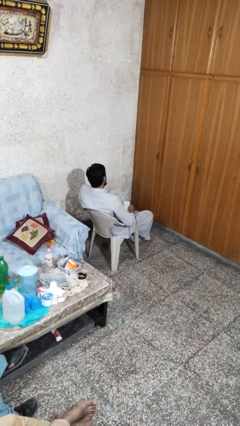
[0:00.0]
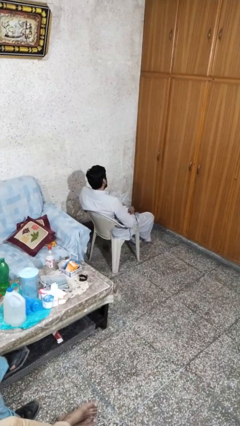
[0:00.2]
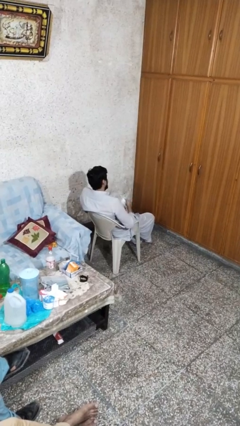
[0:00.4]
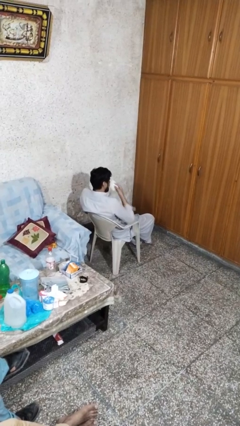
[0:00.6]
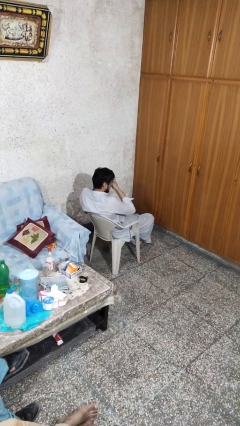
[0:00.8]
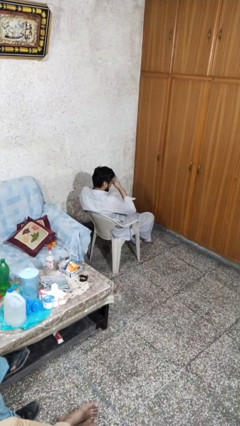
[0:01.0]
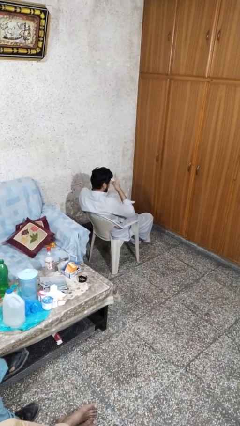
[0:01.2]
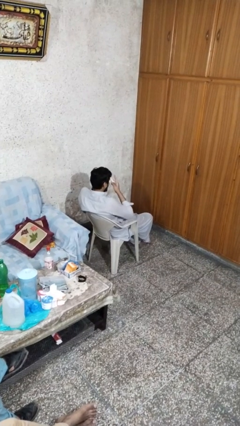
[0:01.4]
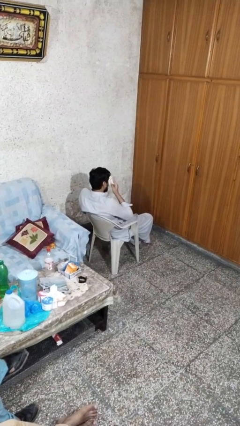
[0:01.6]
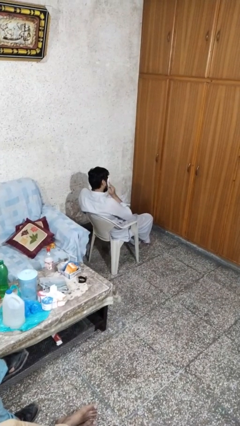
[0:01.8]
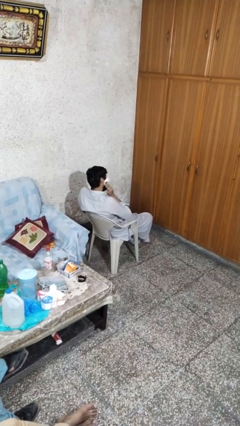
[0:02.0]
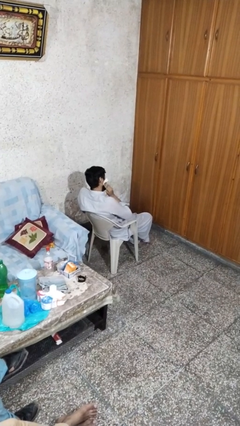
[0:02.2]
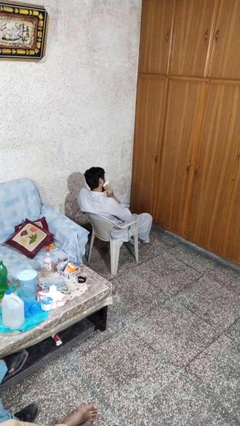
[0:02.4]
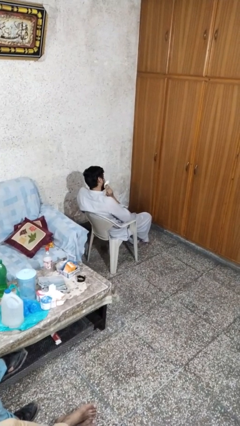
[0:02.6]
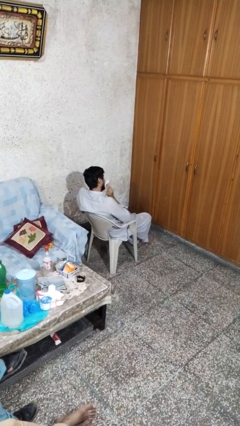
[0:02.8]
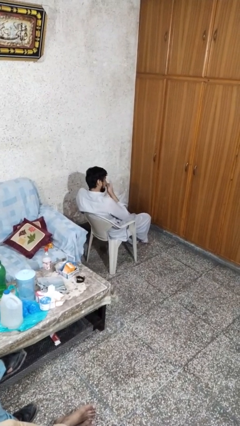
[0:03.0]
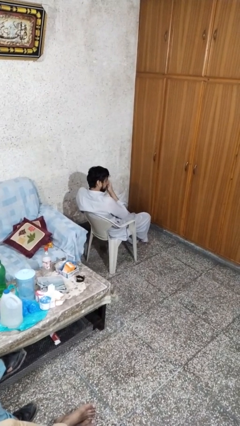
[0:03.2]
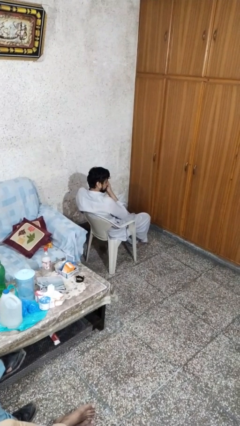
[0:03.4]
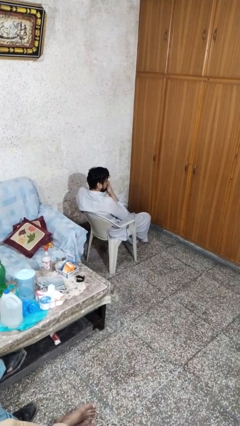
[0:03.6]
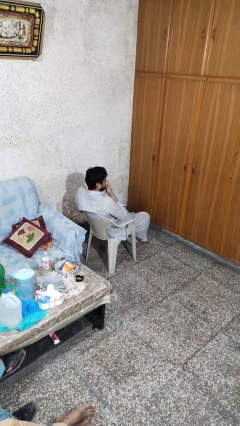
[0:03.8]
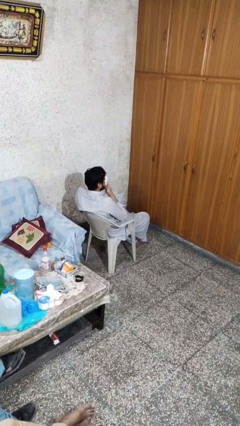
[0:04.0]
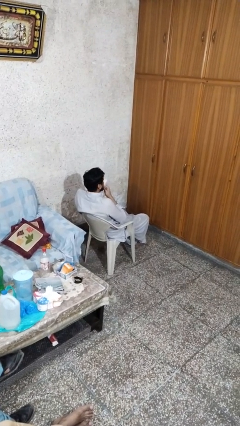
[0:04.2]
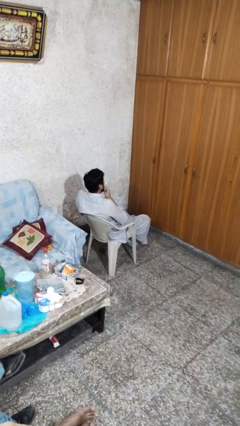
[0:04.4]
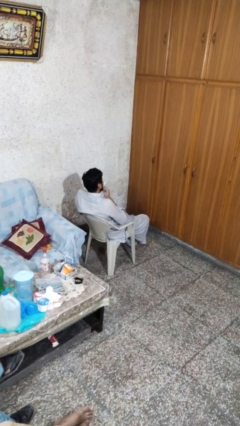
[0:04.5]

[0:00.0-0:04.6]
person wipes mouth with napkin

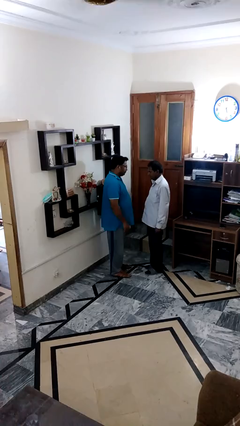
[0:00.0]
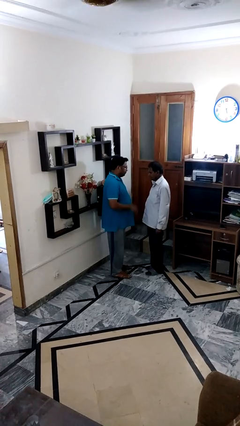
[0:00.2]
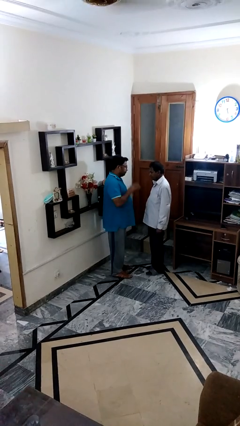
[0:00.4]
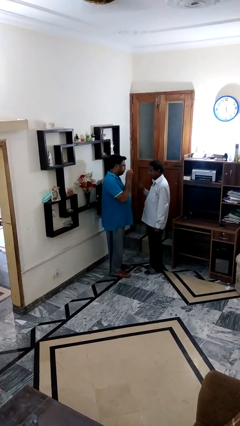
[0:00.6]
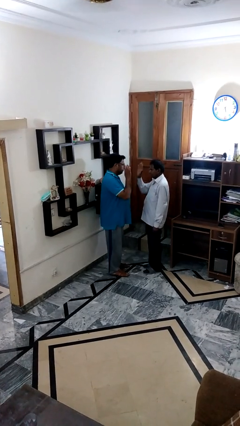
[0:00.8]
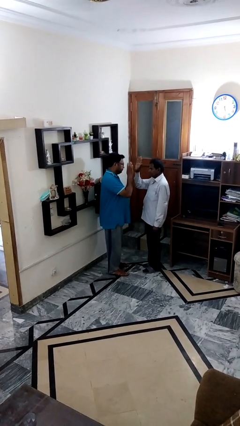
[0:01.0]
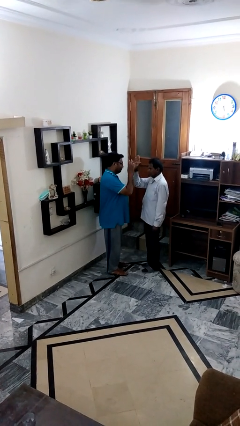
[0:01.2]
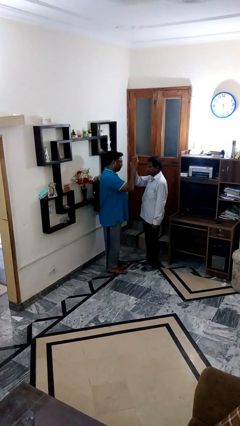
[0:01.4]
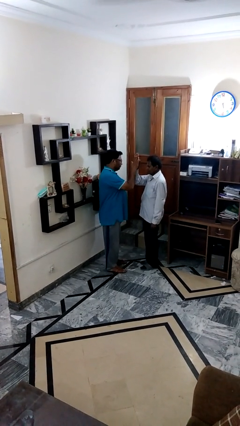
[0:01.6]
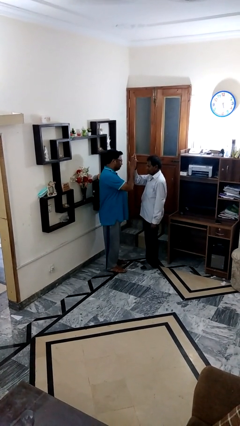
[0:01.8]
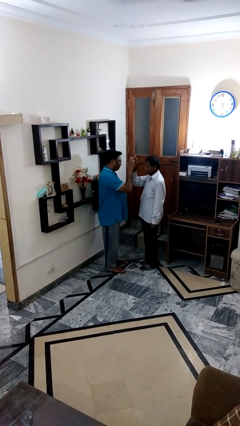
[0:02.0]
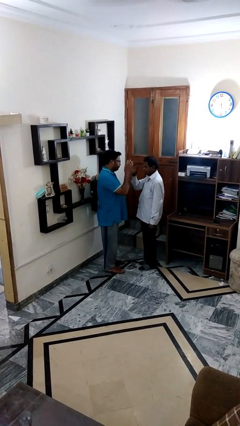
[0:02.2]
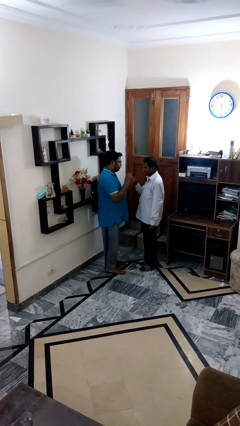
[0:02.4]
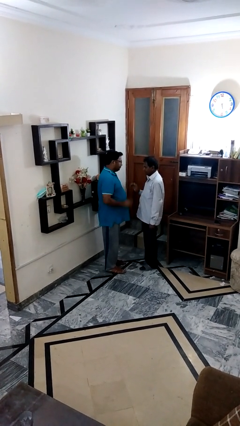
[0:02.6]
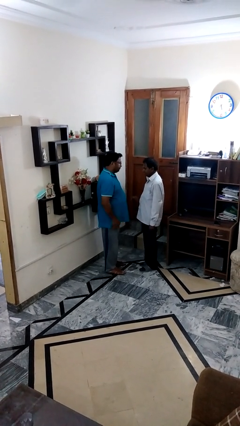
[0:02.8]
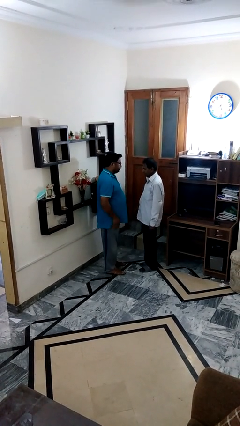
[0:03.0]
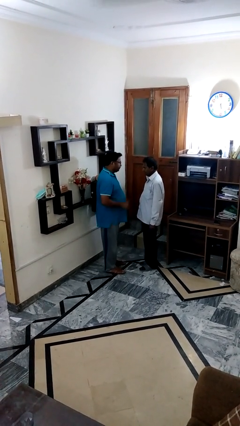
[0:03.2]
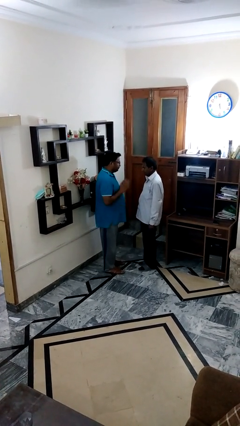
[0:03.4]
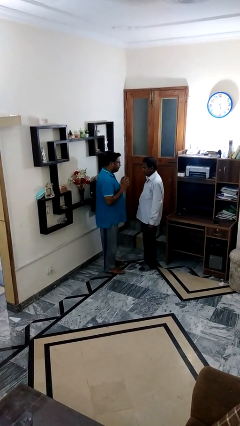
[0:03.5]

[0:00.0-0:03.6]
person highfives hand

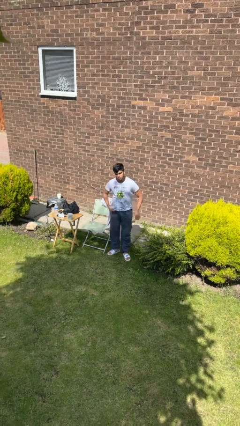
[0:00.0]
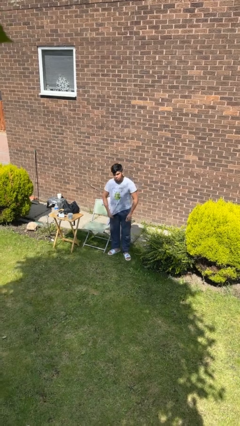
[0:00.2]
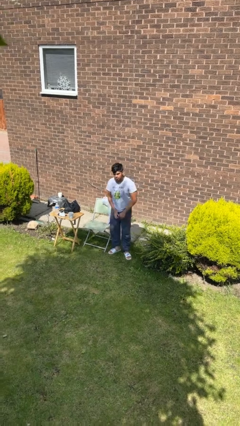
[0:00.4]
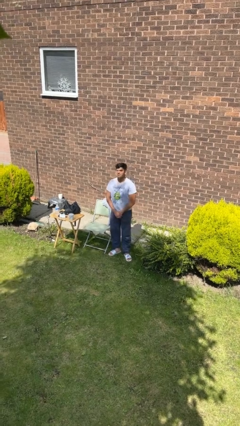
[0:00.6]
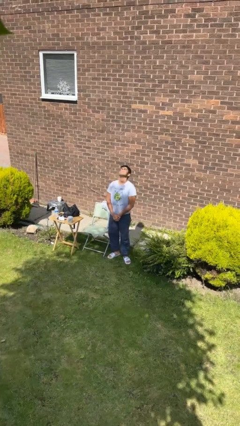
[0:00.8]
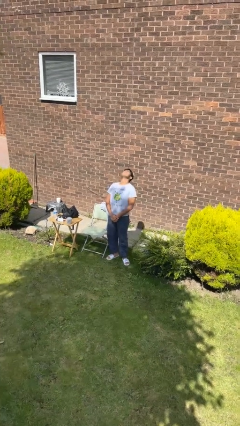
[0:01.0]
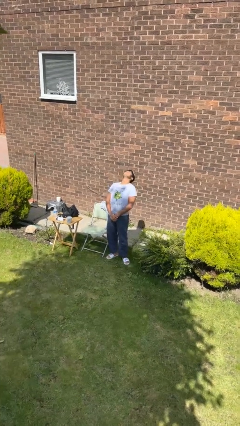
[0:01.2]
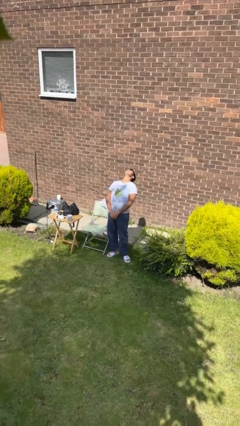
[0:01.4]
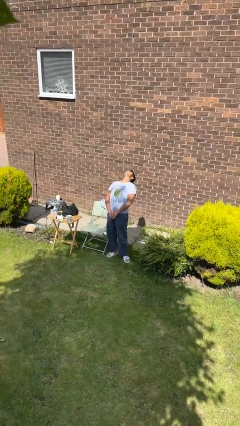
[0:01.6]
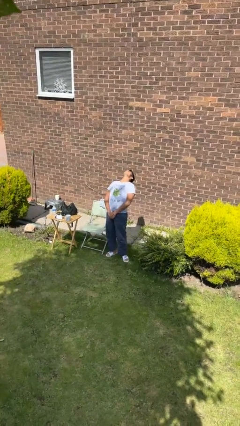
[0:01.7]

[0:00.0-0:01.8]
person stretches back

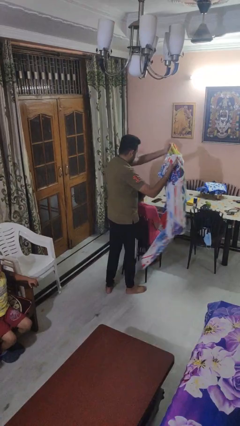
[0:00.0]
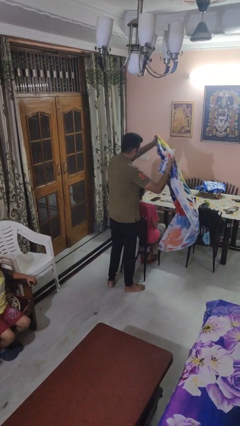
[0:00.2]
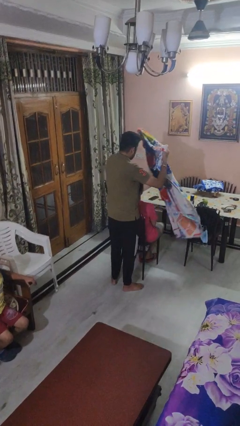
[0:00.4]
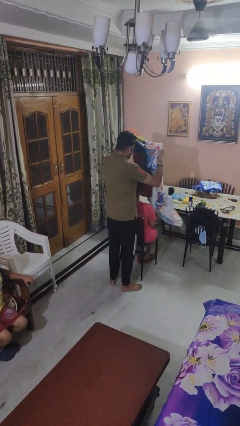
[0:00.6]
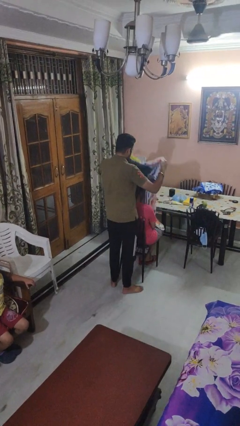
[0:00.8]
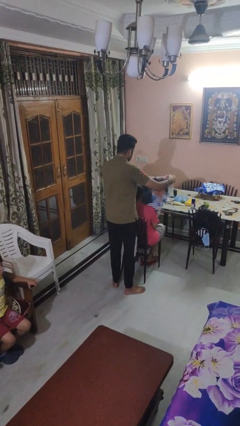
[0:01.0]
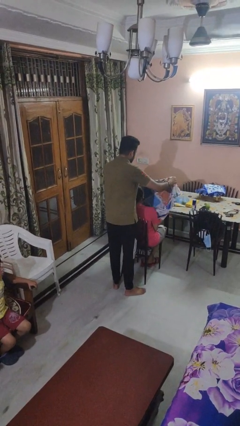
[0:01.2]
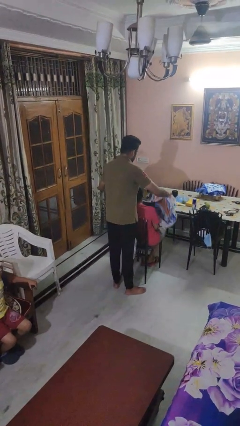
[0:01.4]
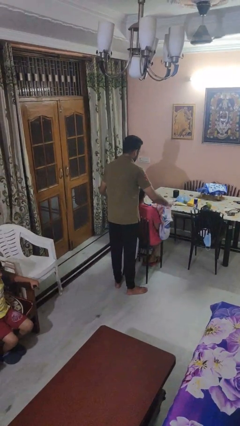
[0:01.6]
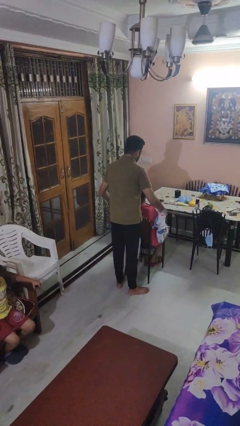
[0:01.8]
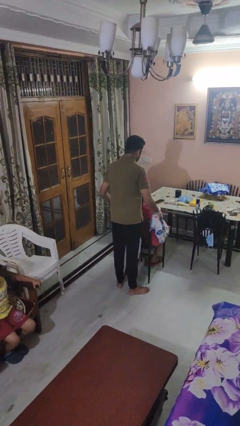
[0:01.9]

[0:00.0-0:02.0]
person covers friend with blanket

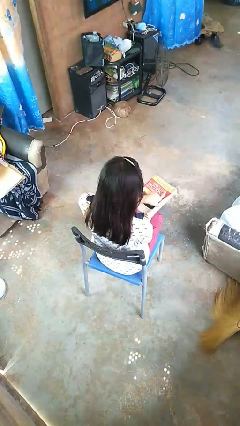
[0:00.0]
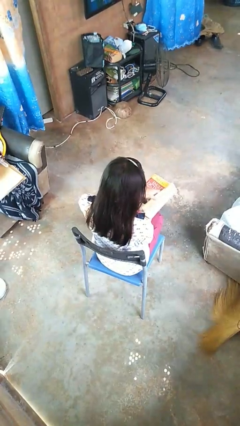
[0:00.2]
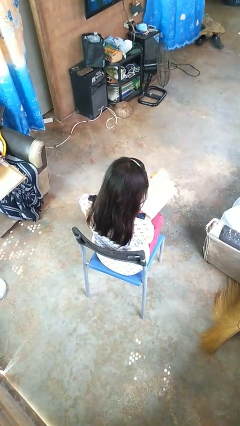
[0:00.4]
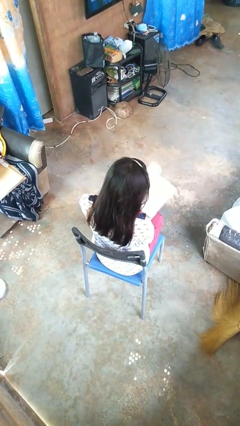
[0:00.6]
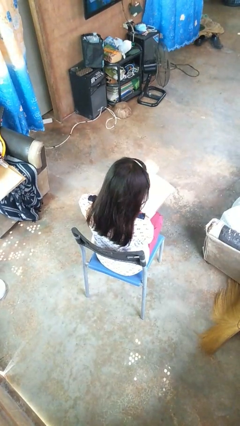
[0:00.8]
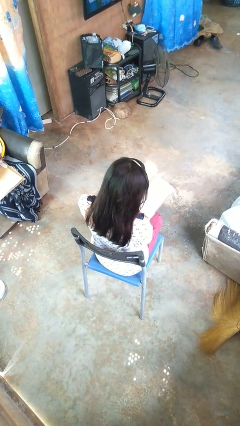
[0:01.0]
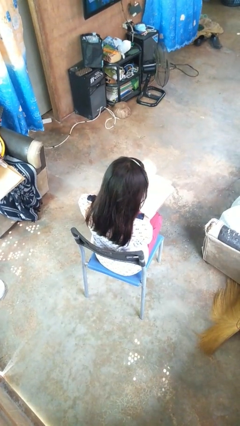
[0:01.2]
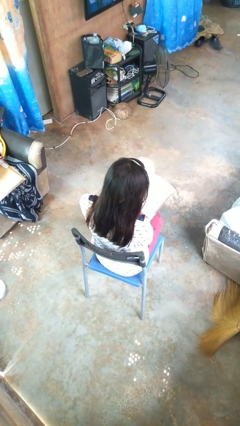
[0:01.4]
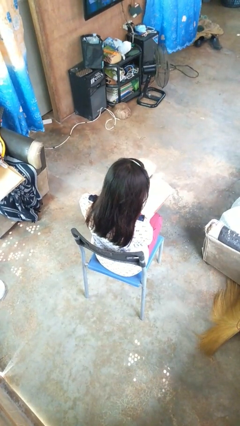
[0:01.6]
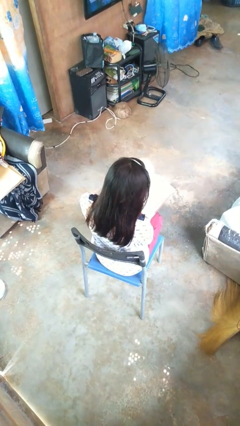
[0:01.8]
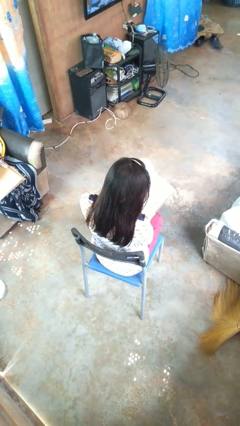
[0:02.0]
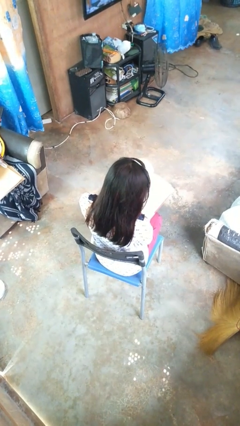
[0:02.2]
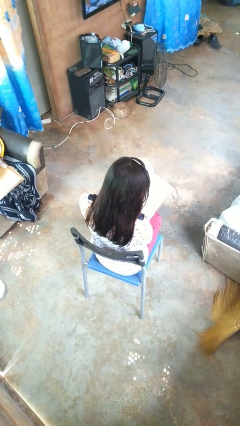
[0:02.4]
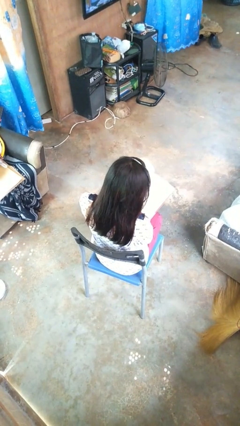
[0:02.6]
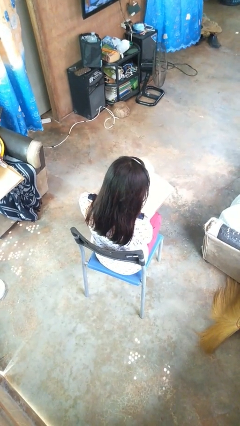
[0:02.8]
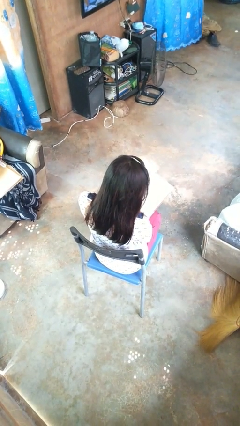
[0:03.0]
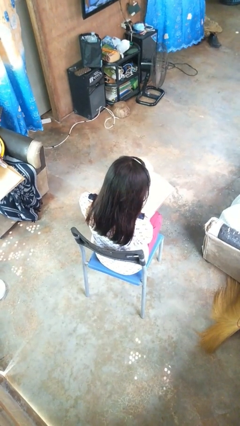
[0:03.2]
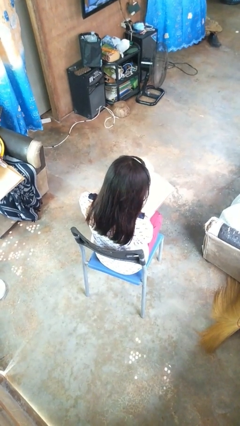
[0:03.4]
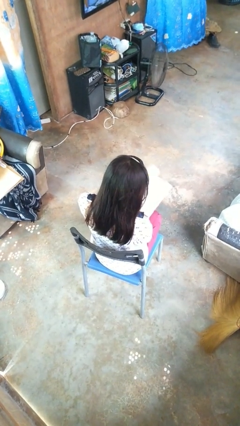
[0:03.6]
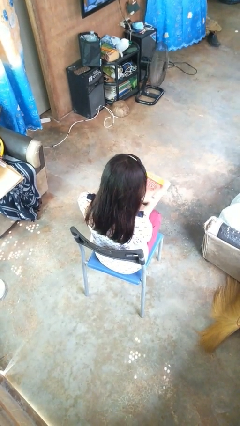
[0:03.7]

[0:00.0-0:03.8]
person reads book

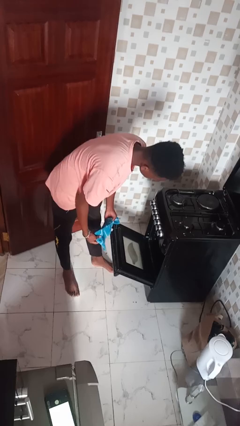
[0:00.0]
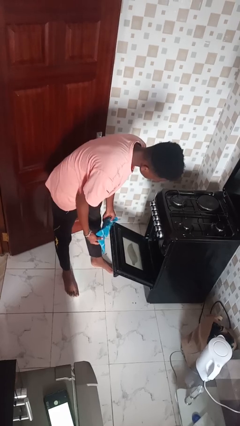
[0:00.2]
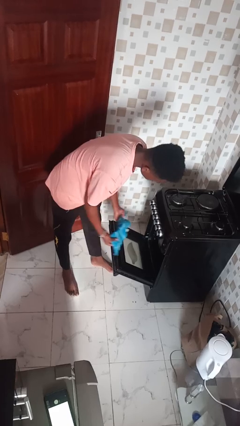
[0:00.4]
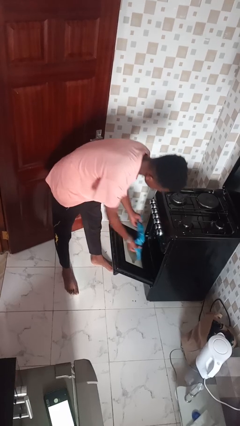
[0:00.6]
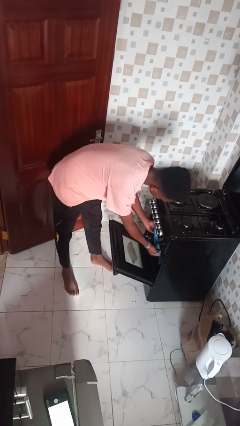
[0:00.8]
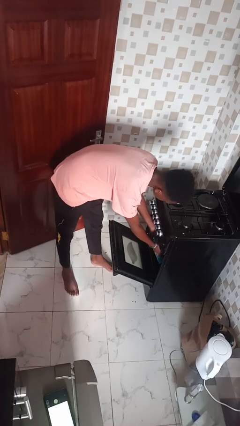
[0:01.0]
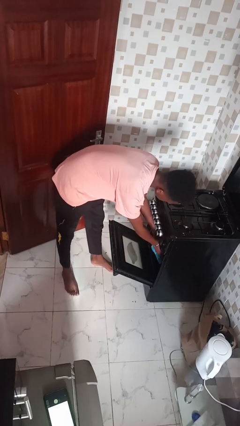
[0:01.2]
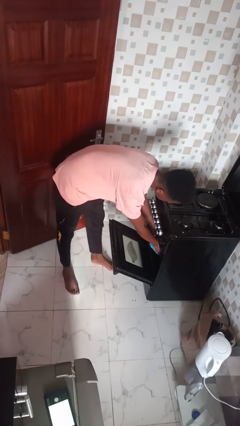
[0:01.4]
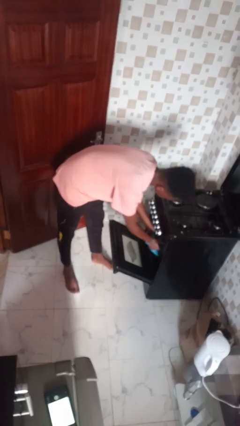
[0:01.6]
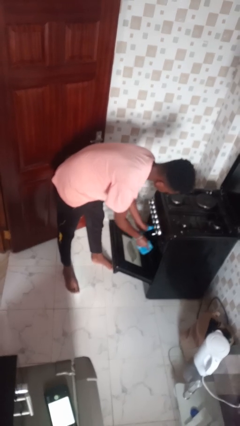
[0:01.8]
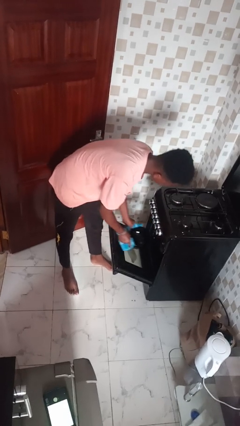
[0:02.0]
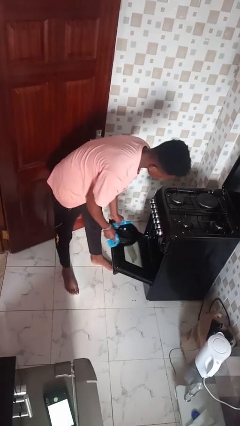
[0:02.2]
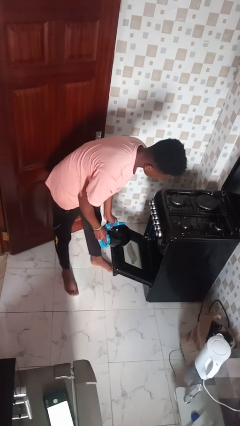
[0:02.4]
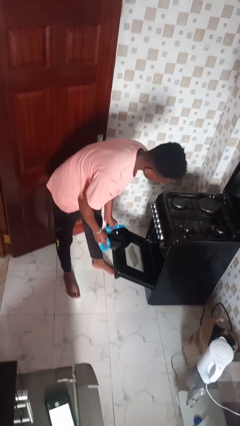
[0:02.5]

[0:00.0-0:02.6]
person takes object from oven
